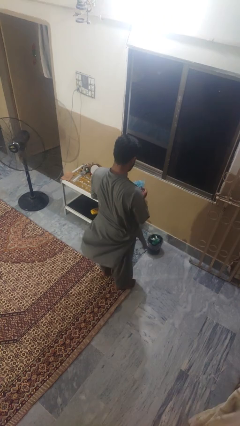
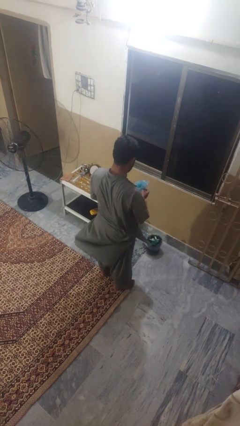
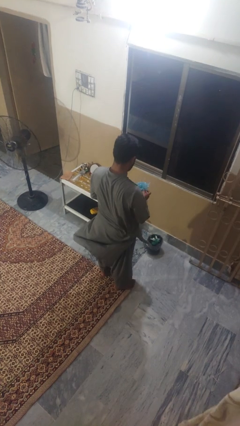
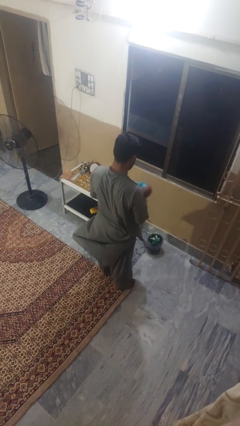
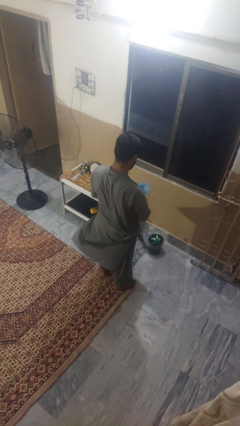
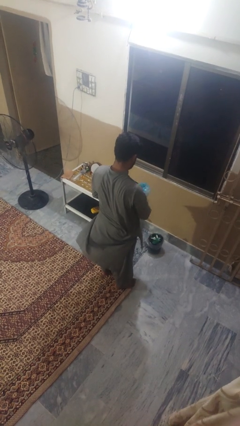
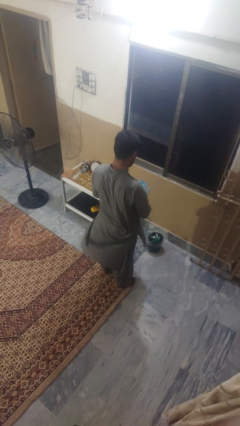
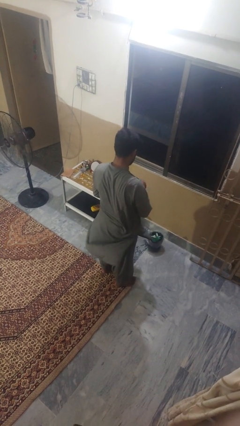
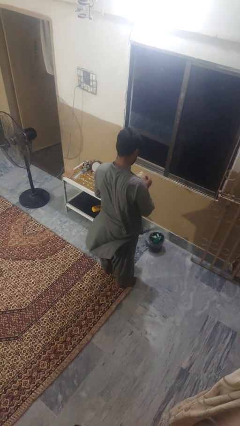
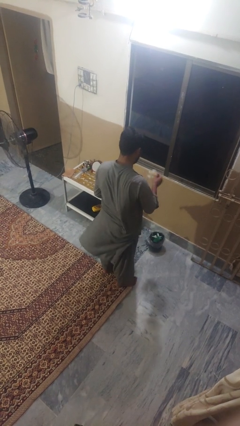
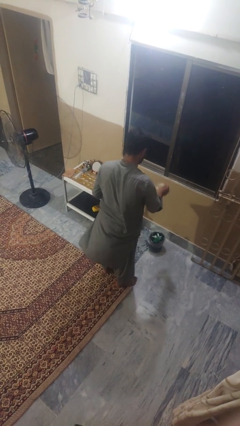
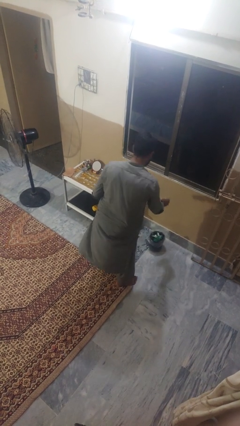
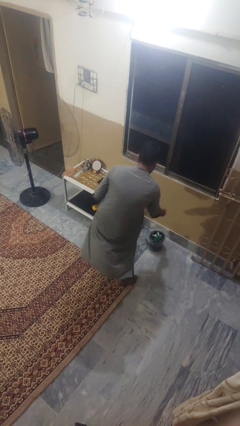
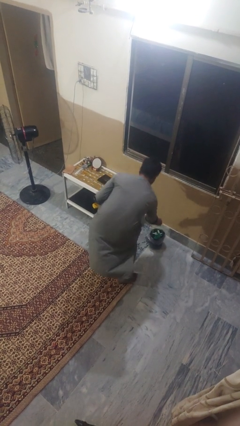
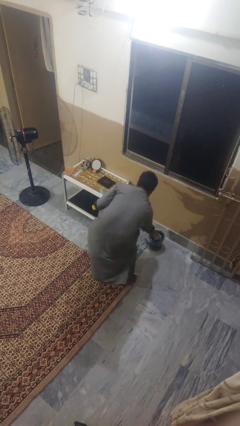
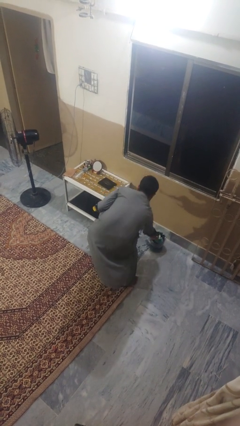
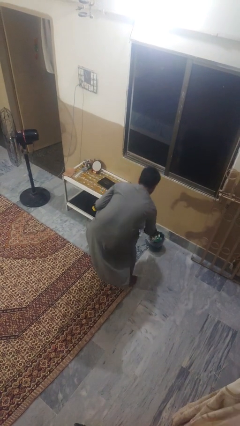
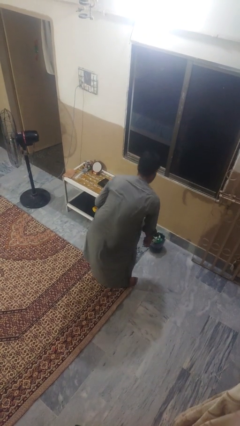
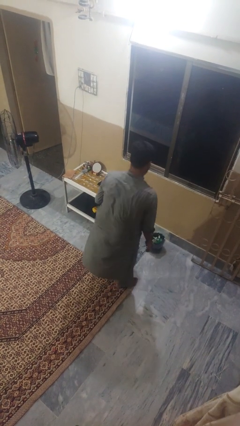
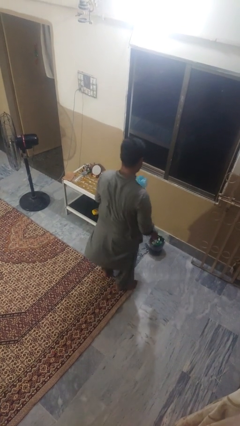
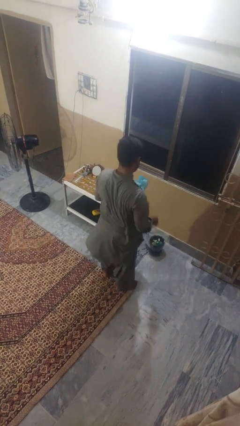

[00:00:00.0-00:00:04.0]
person discards trash

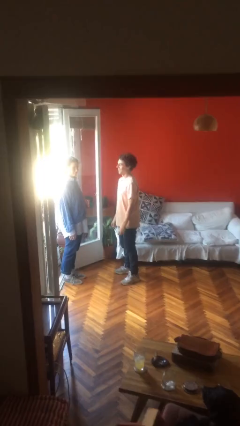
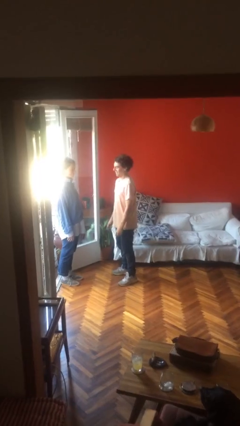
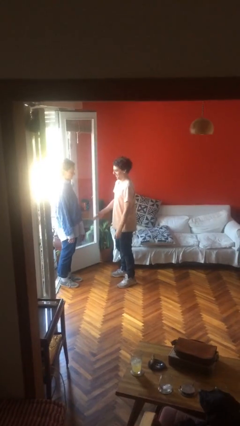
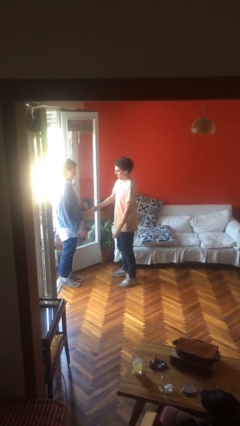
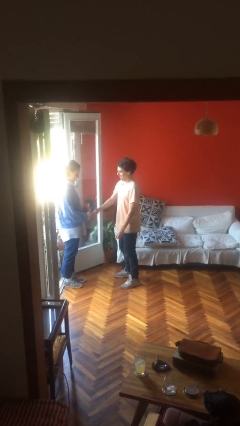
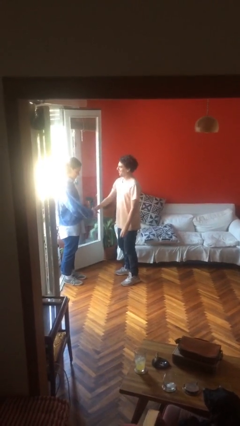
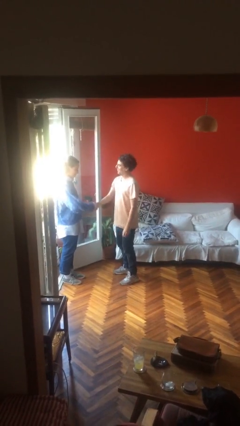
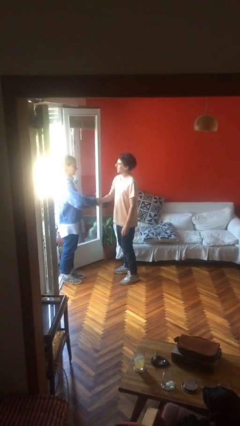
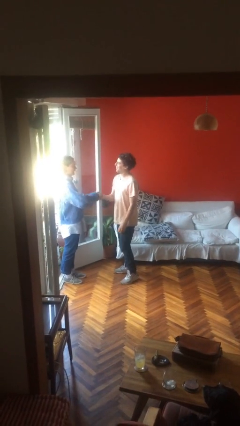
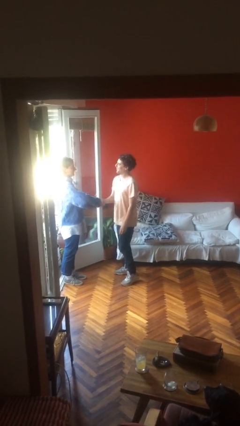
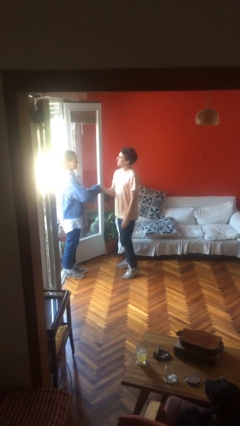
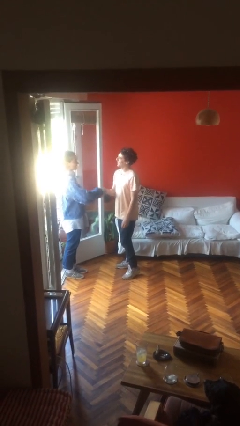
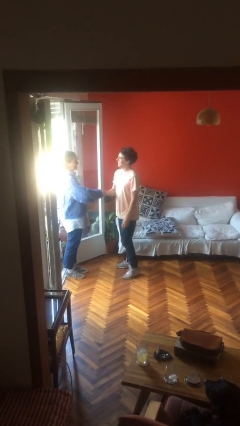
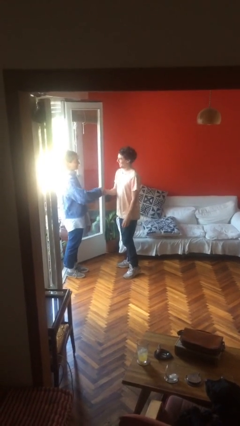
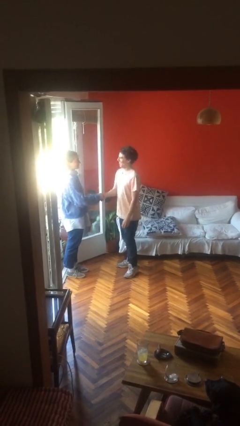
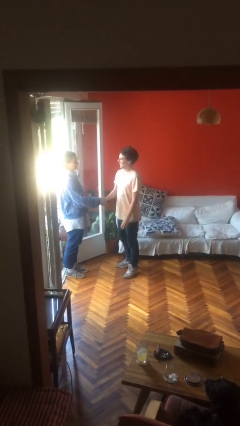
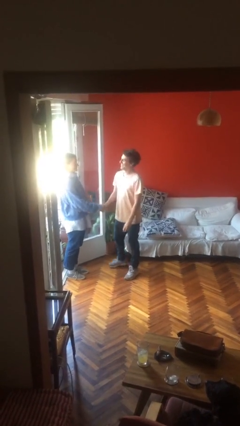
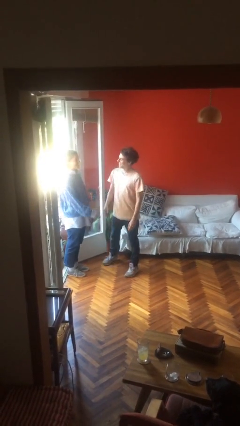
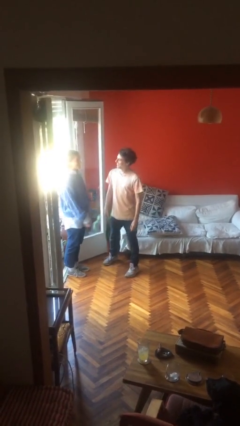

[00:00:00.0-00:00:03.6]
person shakes hand

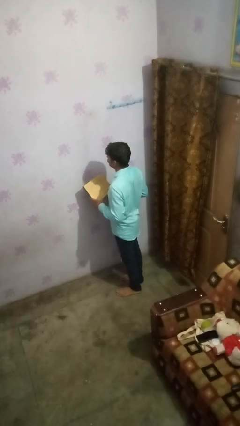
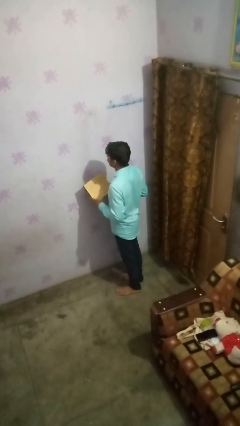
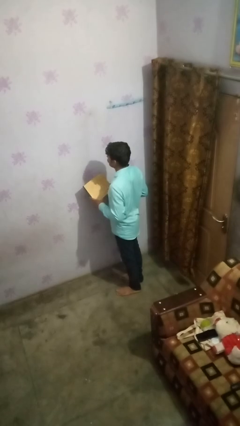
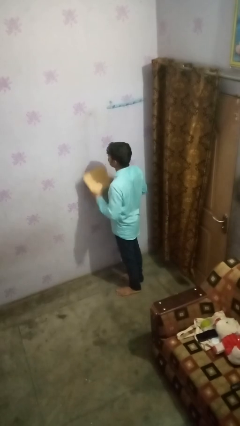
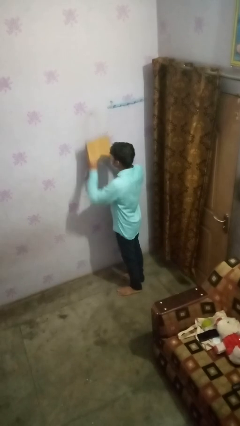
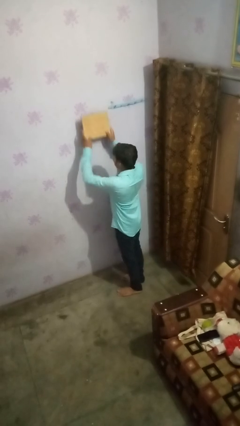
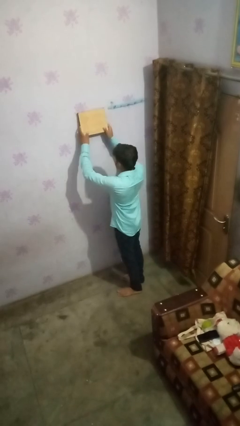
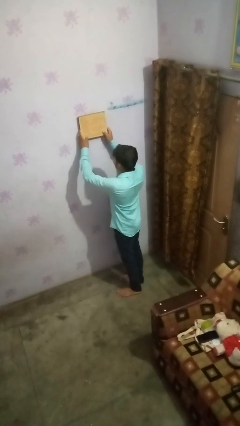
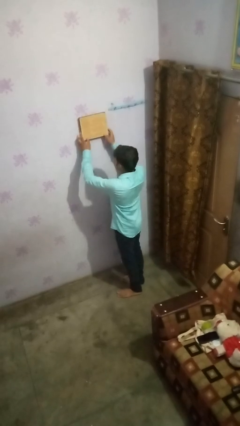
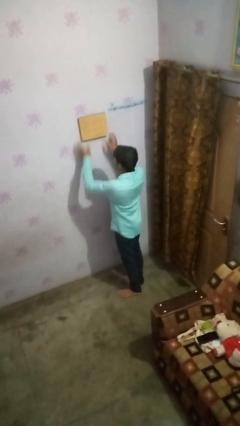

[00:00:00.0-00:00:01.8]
person puts up picture frame

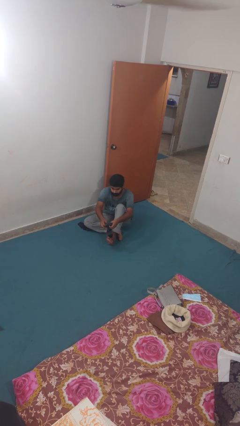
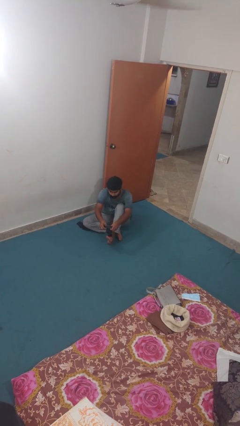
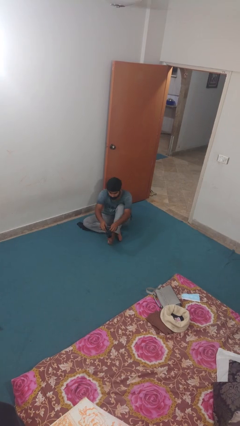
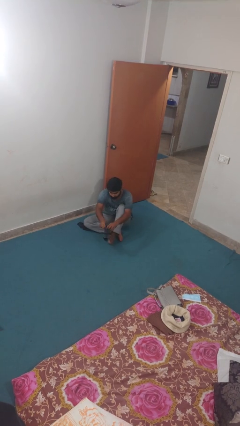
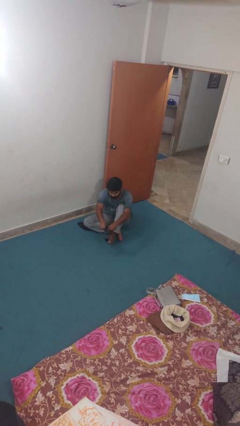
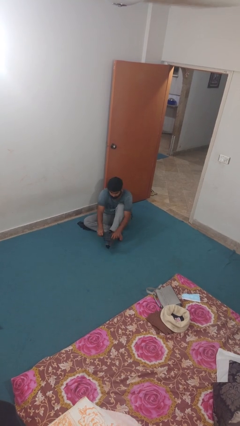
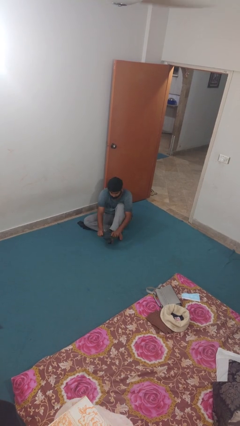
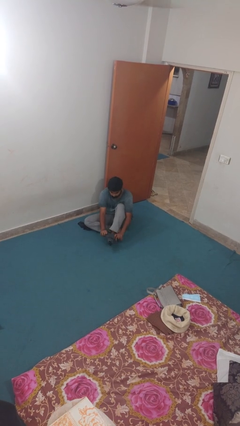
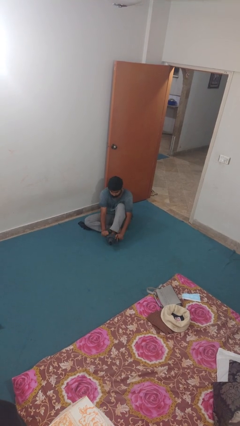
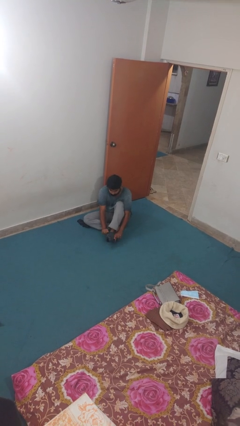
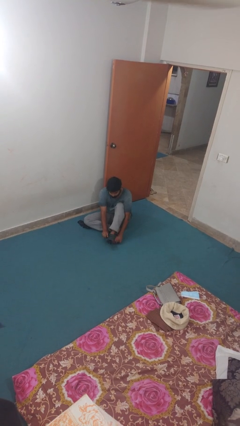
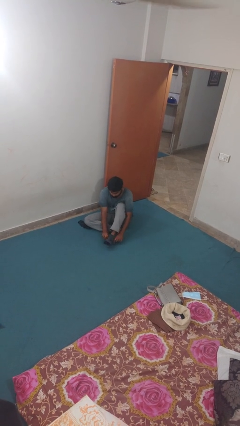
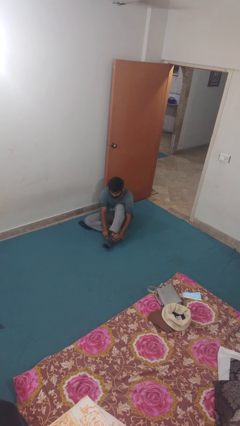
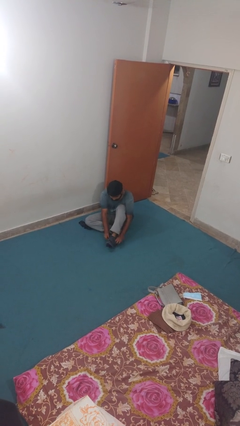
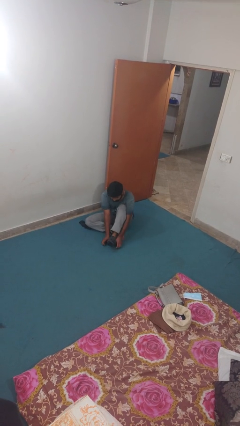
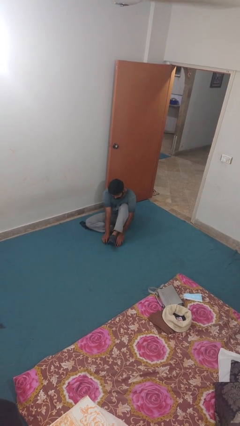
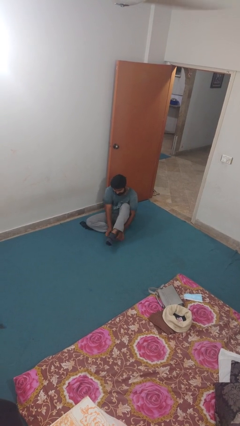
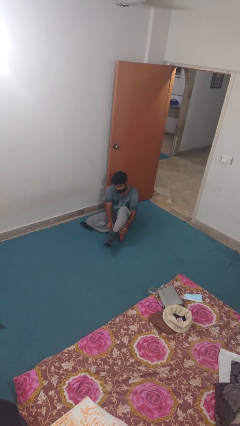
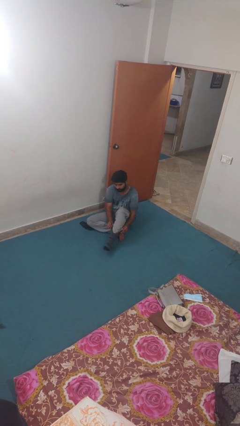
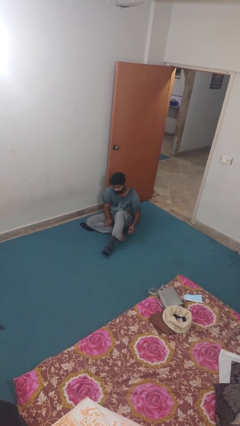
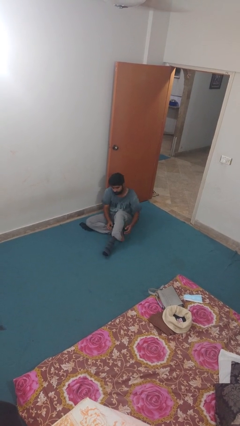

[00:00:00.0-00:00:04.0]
person puts on socks

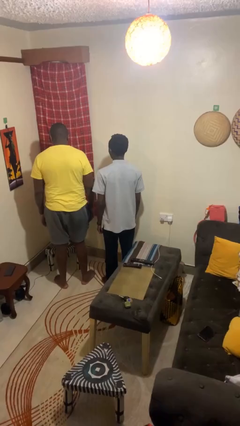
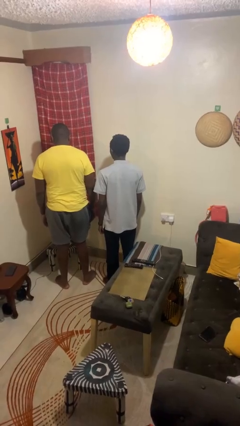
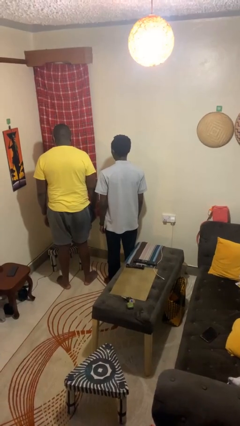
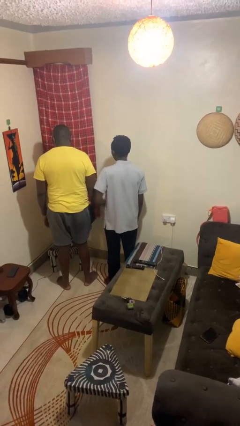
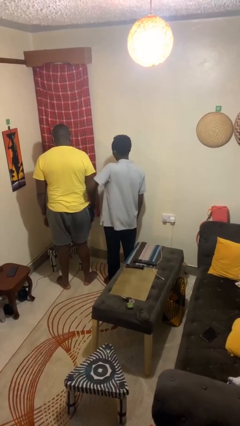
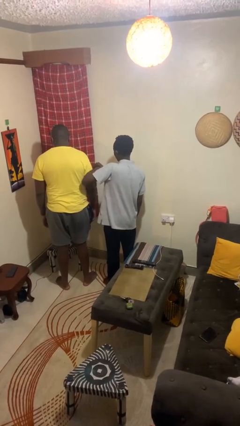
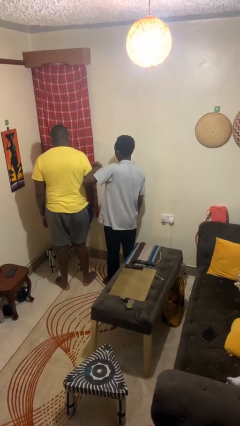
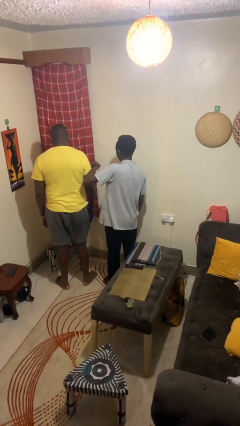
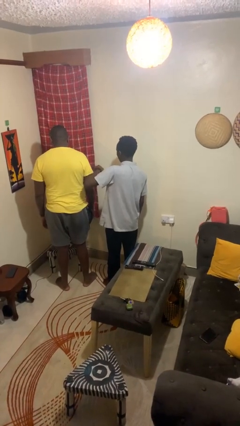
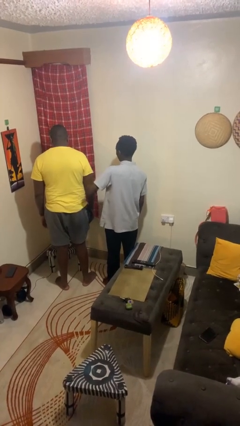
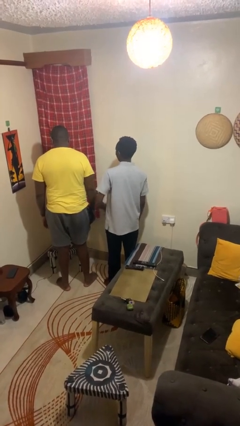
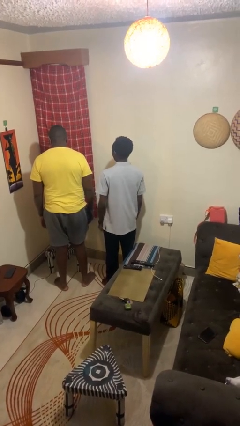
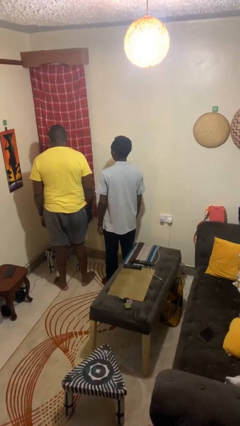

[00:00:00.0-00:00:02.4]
person nudges person with elbow

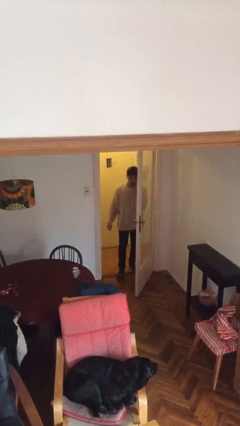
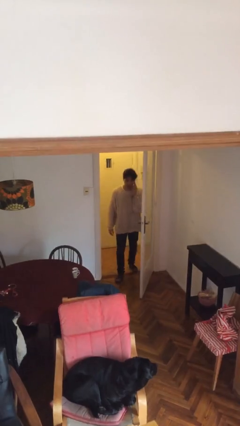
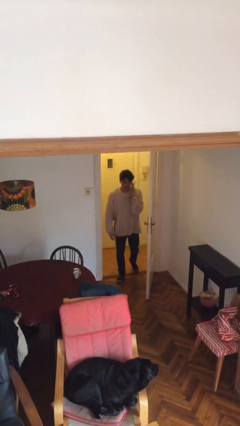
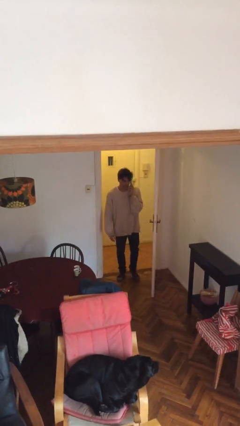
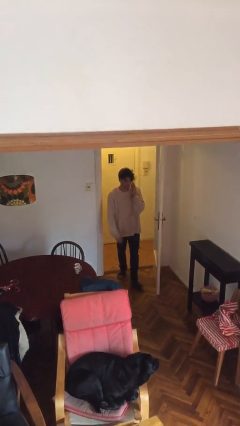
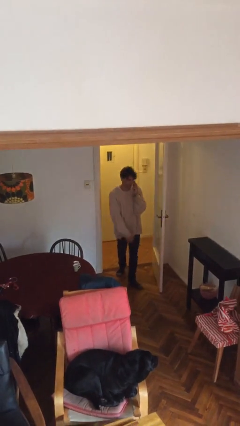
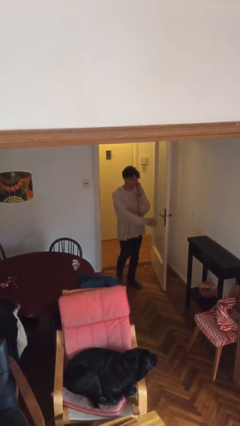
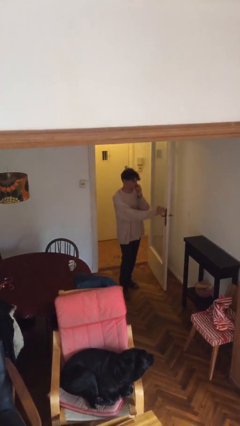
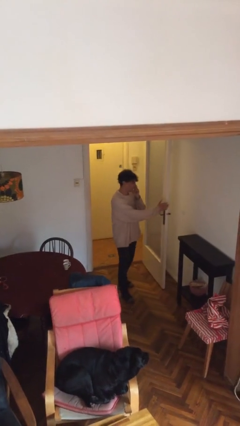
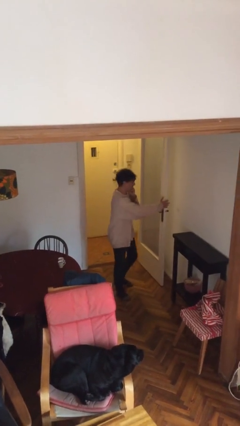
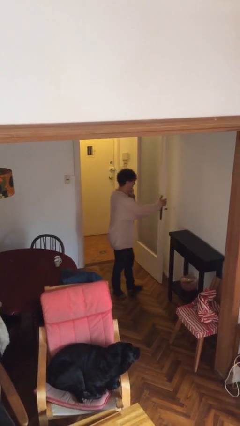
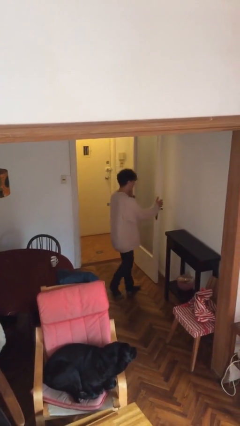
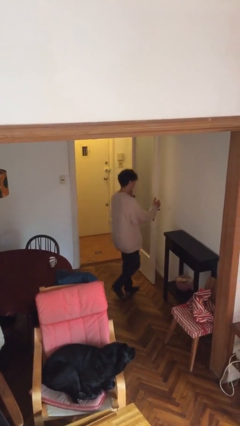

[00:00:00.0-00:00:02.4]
person enters scene through structure
